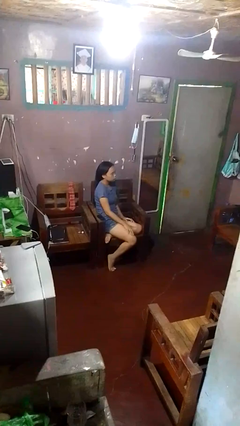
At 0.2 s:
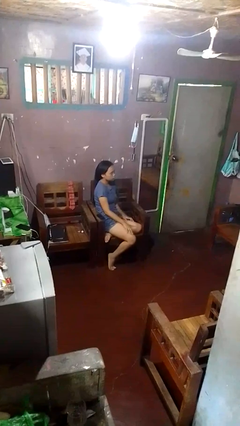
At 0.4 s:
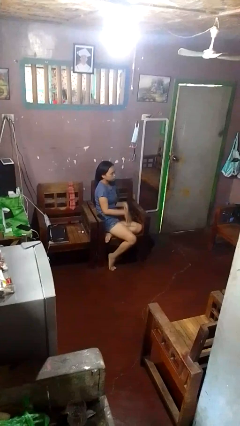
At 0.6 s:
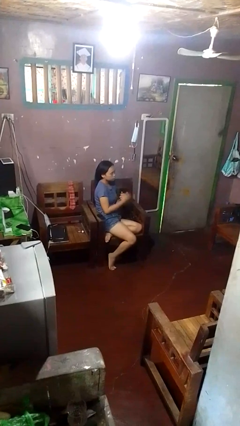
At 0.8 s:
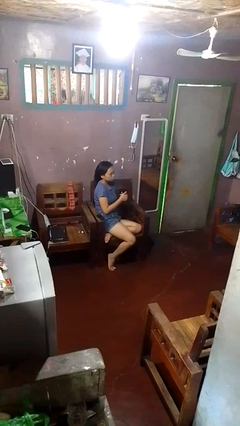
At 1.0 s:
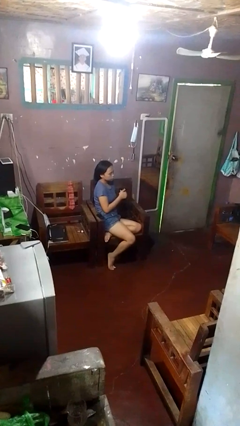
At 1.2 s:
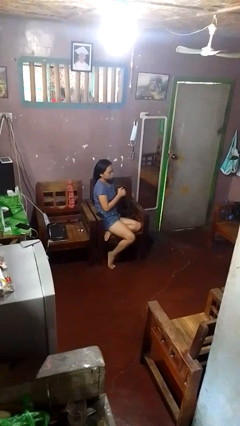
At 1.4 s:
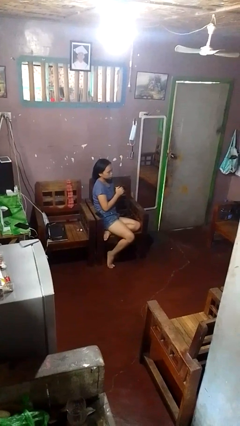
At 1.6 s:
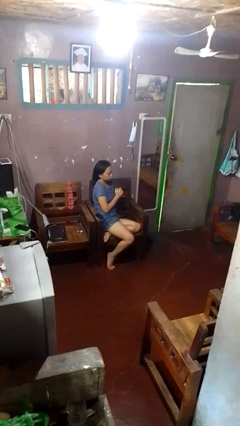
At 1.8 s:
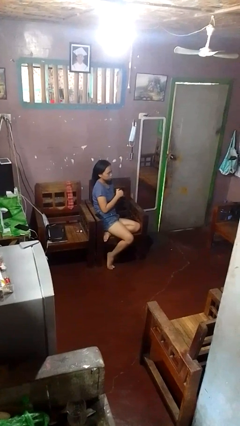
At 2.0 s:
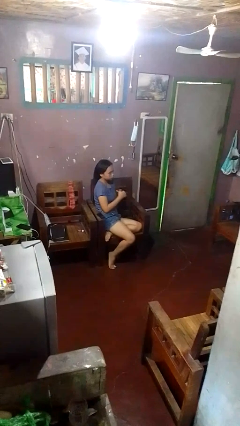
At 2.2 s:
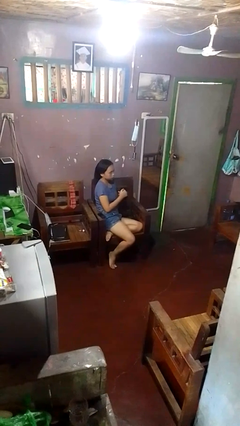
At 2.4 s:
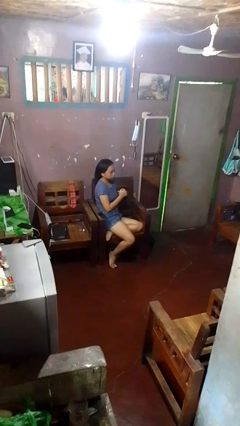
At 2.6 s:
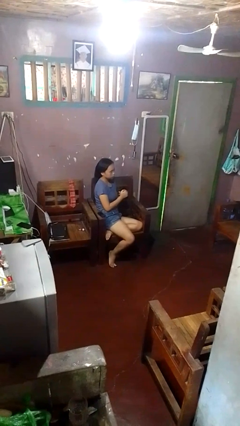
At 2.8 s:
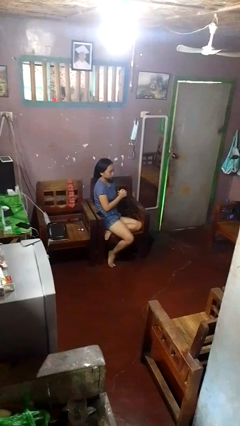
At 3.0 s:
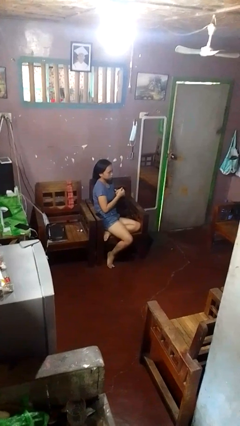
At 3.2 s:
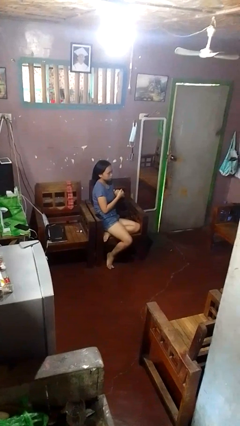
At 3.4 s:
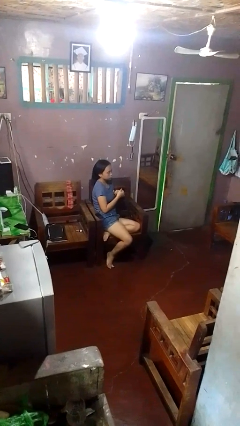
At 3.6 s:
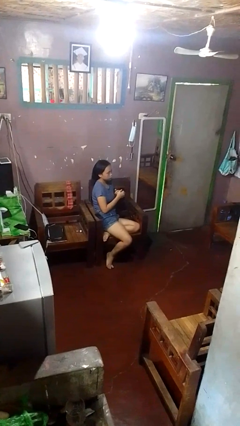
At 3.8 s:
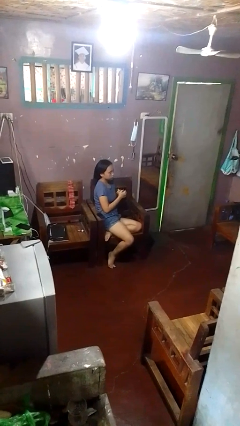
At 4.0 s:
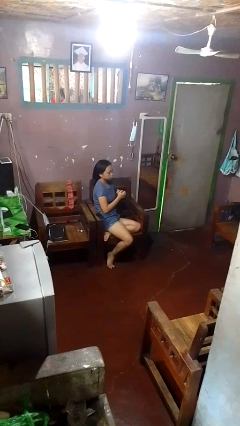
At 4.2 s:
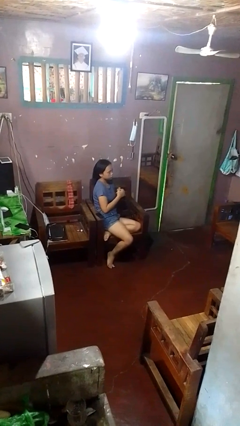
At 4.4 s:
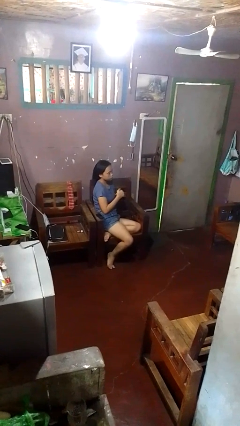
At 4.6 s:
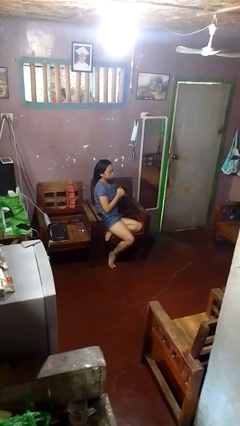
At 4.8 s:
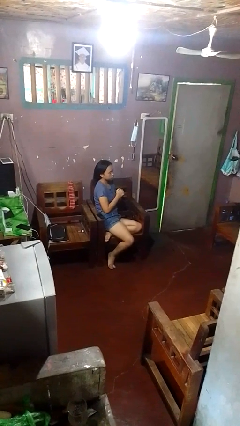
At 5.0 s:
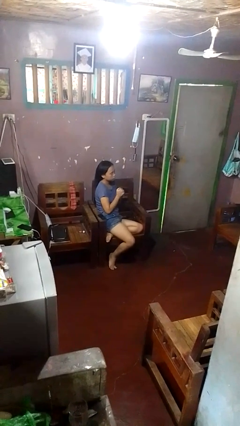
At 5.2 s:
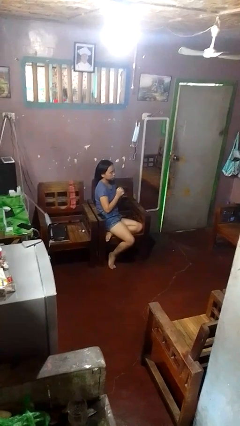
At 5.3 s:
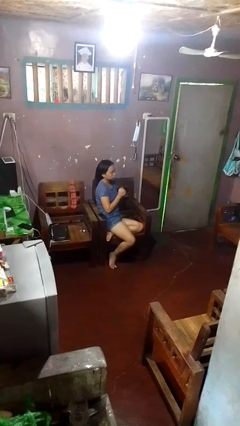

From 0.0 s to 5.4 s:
person cracks knuckles

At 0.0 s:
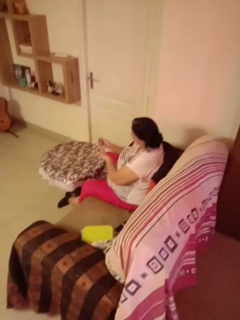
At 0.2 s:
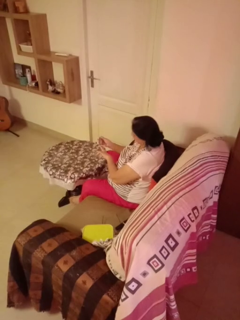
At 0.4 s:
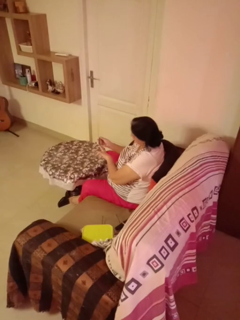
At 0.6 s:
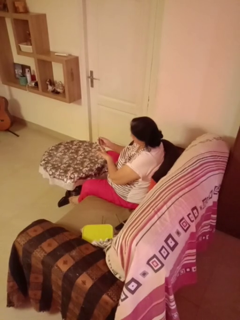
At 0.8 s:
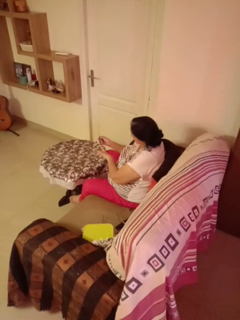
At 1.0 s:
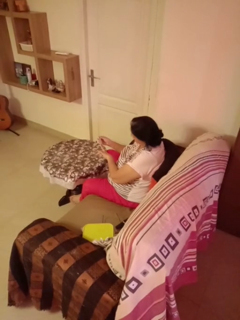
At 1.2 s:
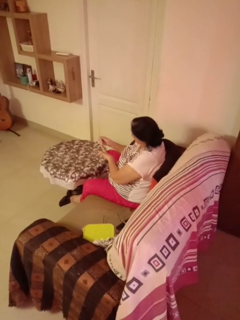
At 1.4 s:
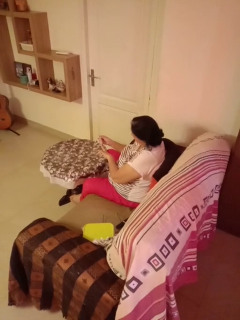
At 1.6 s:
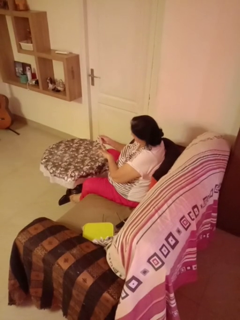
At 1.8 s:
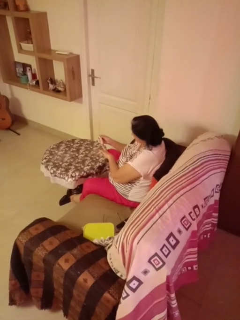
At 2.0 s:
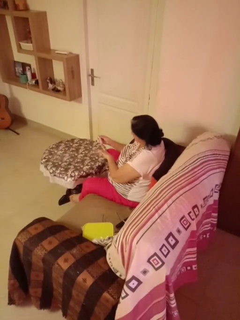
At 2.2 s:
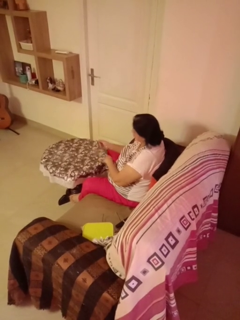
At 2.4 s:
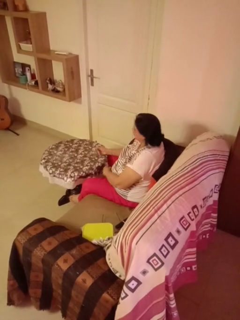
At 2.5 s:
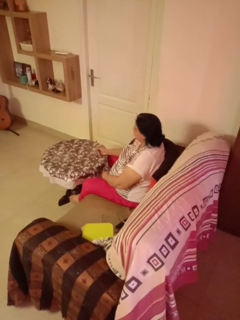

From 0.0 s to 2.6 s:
person clips fingernails

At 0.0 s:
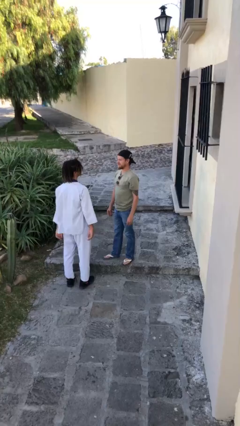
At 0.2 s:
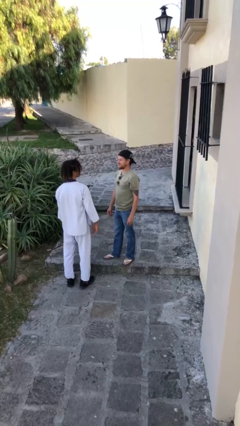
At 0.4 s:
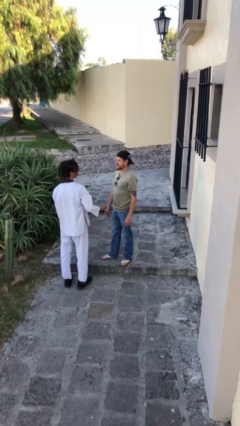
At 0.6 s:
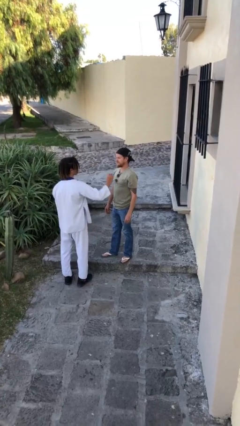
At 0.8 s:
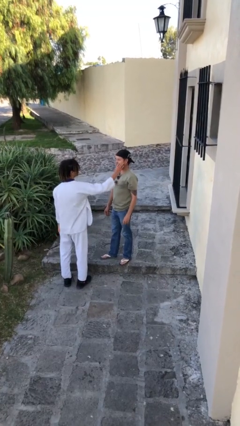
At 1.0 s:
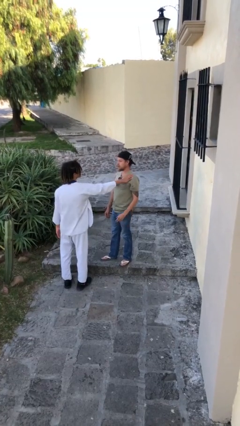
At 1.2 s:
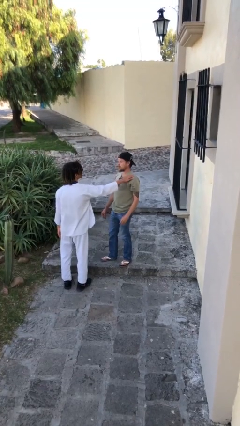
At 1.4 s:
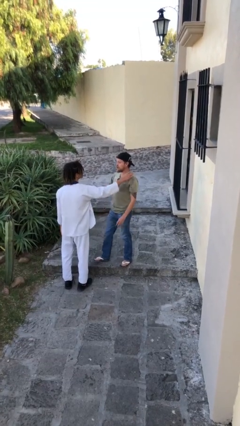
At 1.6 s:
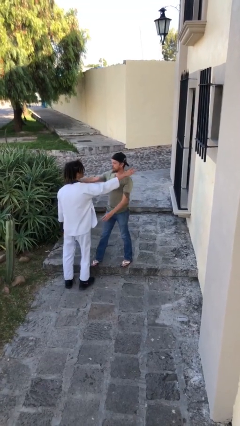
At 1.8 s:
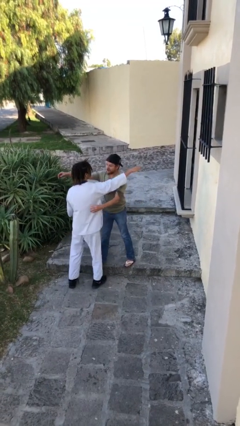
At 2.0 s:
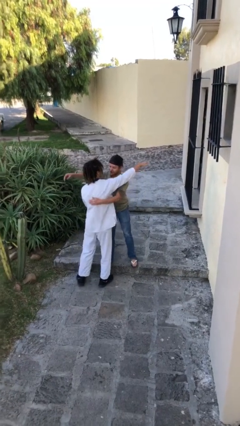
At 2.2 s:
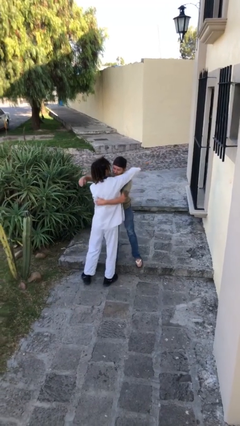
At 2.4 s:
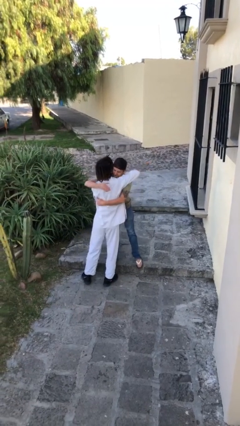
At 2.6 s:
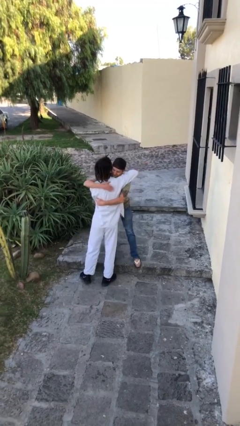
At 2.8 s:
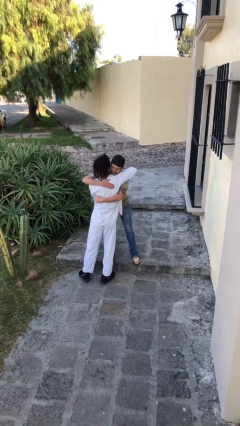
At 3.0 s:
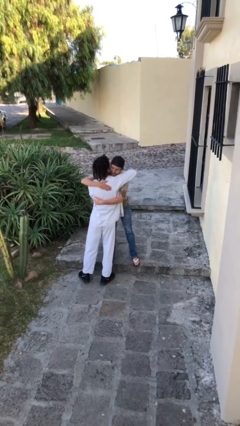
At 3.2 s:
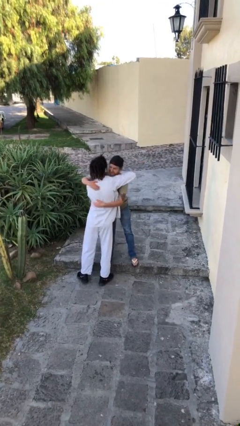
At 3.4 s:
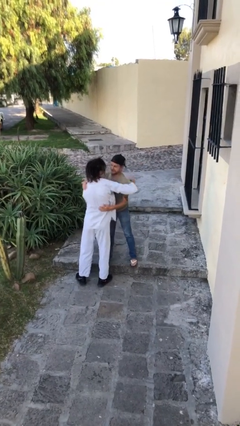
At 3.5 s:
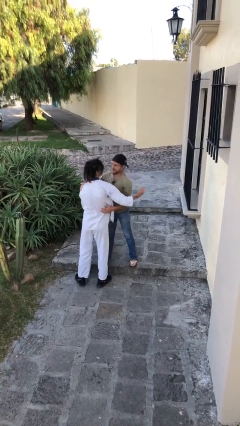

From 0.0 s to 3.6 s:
person embraces person

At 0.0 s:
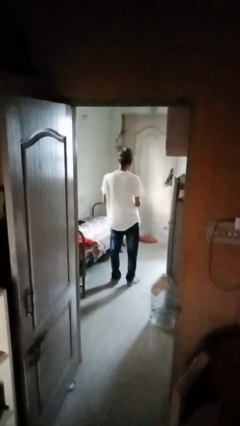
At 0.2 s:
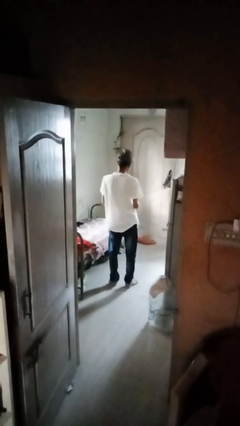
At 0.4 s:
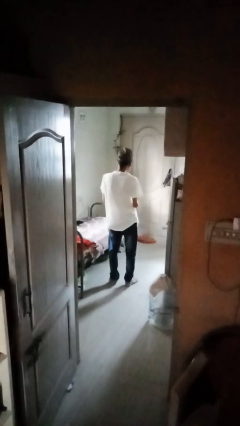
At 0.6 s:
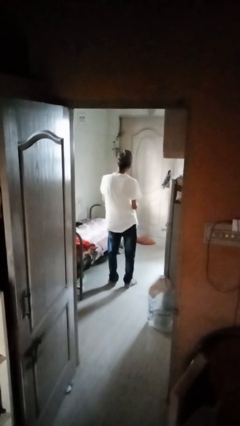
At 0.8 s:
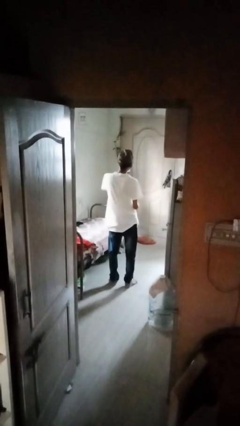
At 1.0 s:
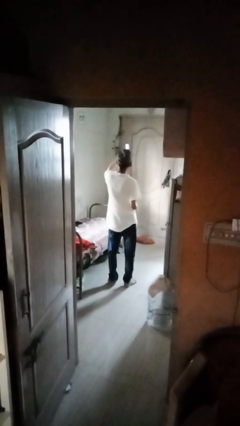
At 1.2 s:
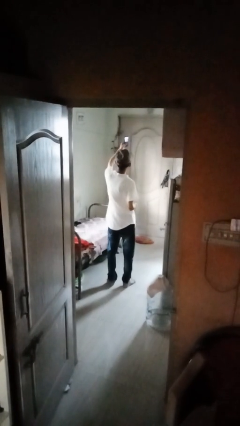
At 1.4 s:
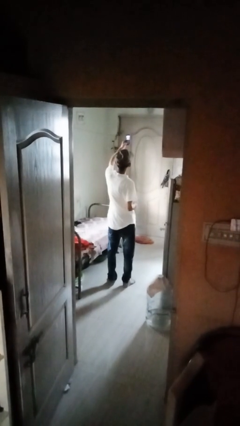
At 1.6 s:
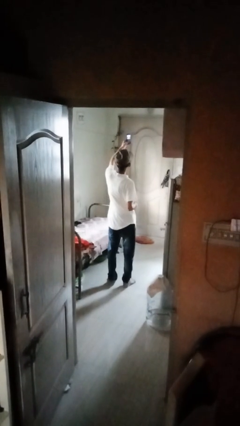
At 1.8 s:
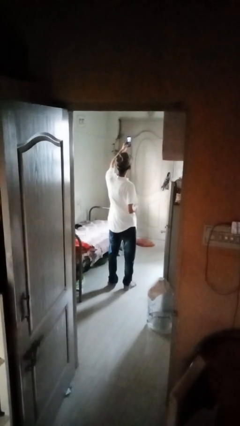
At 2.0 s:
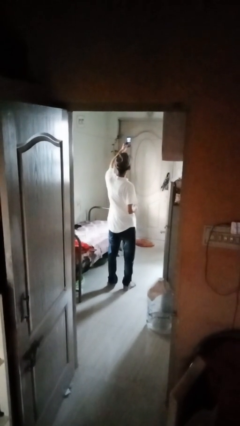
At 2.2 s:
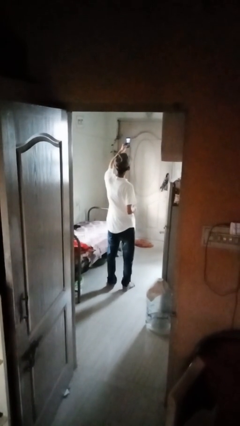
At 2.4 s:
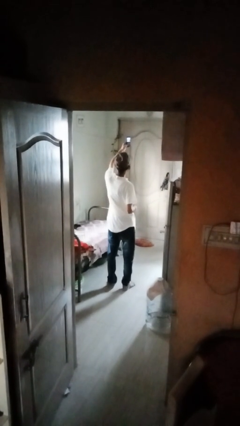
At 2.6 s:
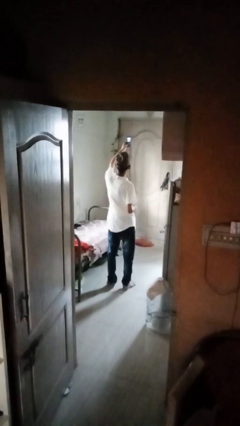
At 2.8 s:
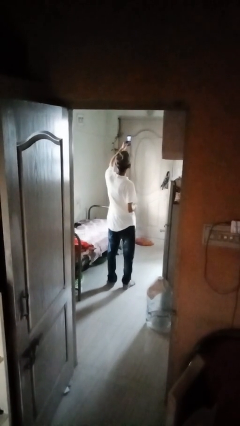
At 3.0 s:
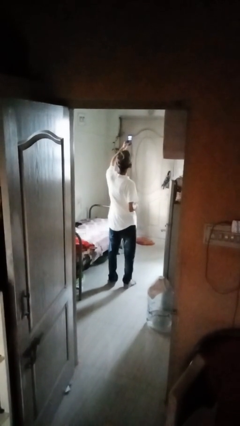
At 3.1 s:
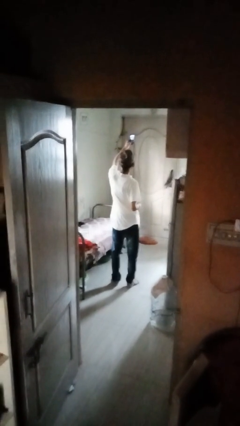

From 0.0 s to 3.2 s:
person takes selfie

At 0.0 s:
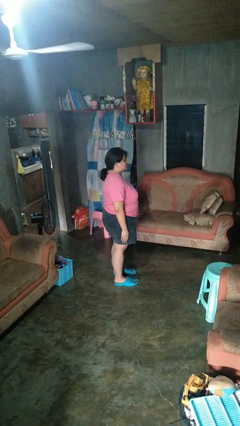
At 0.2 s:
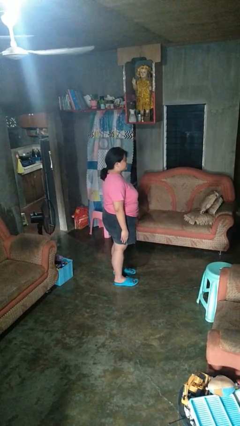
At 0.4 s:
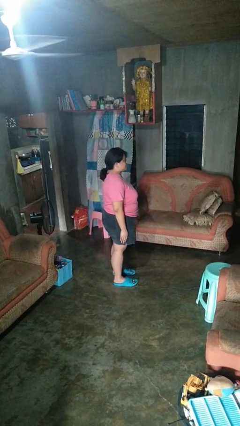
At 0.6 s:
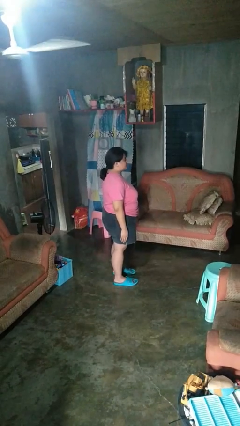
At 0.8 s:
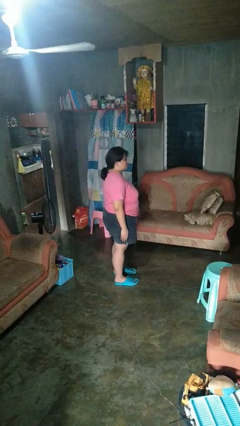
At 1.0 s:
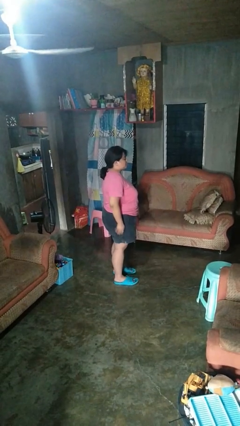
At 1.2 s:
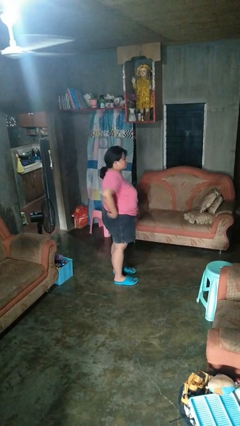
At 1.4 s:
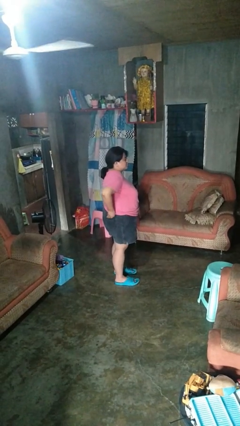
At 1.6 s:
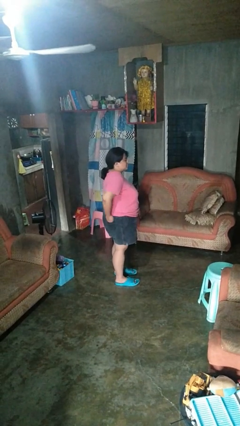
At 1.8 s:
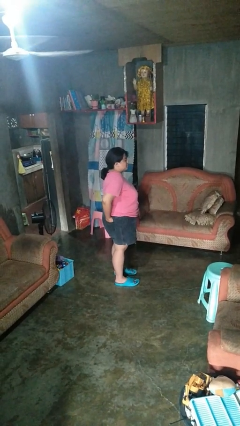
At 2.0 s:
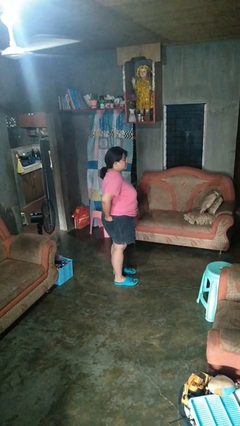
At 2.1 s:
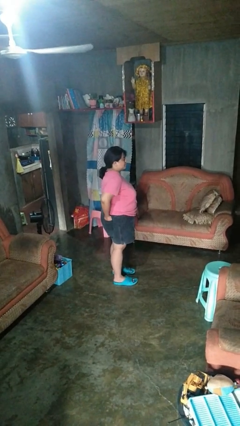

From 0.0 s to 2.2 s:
person puts hands in back pockets

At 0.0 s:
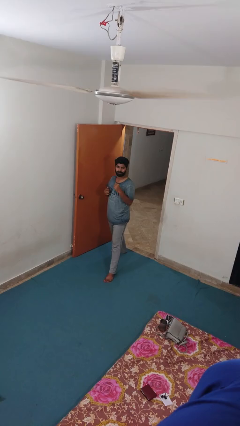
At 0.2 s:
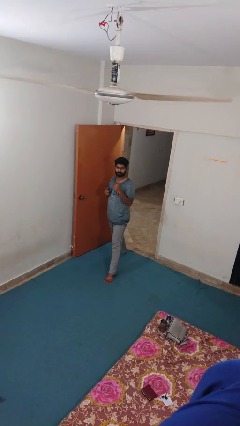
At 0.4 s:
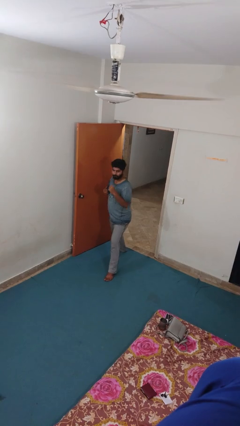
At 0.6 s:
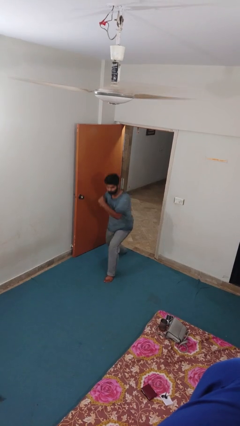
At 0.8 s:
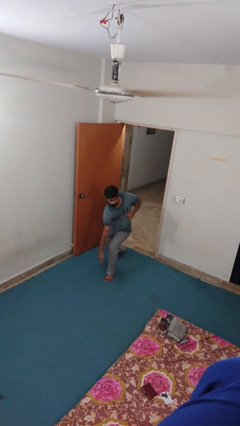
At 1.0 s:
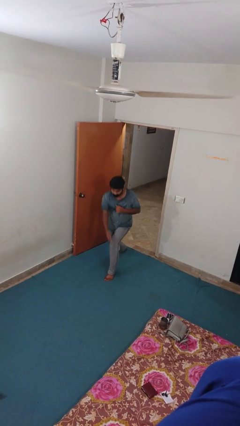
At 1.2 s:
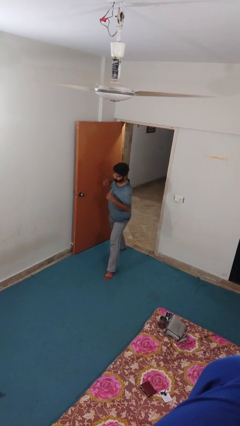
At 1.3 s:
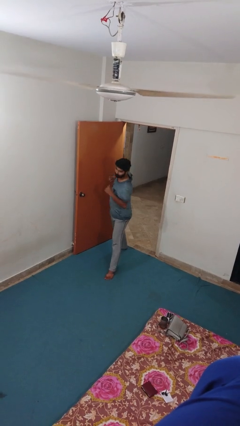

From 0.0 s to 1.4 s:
person karate chop
